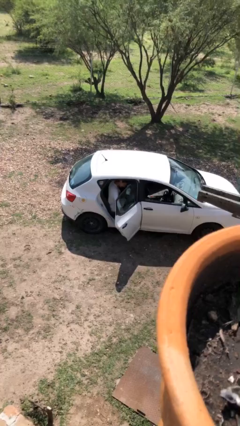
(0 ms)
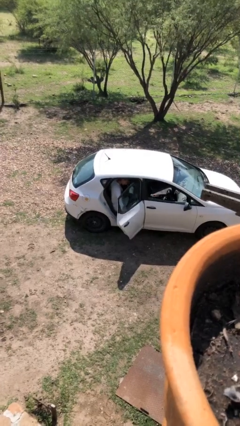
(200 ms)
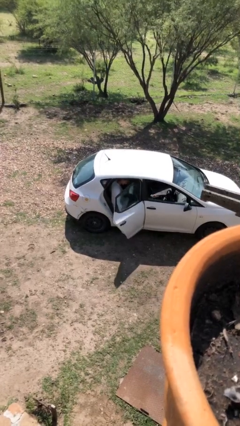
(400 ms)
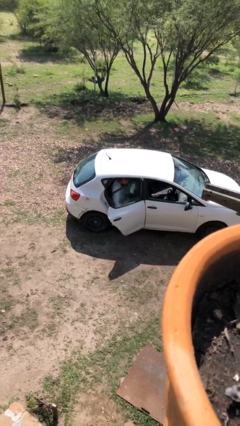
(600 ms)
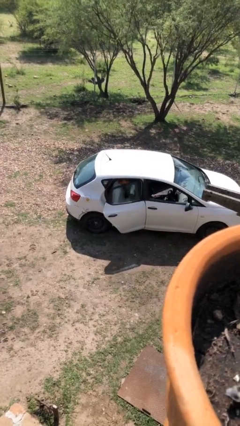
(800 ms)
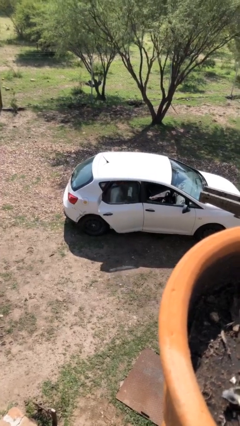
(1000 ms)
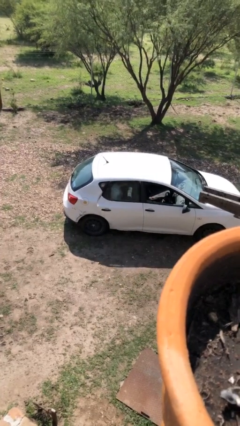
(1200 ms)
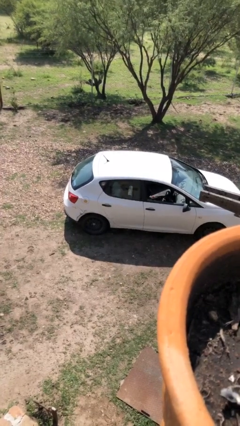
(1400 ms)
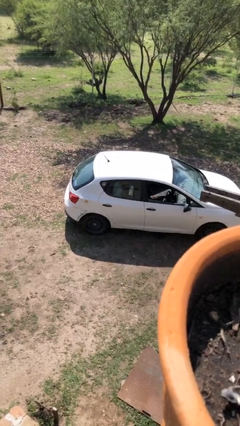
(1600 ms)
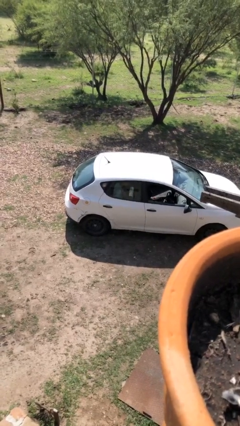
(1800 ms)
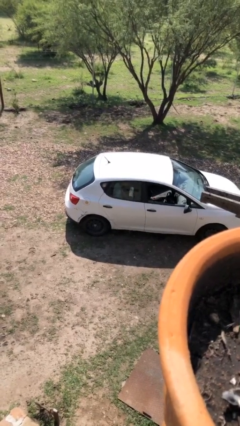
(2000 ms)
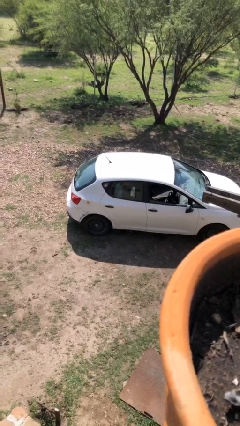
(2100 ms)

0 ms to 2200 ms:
person closes car door

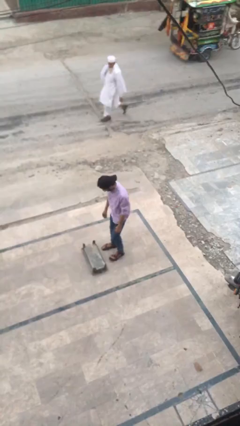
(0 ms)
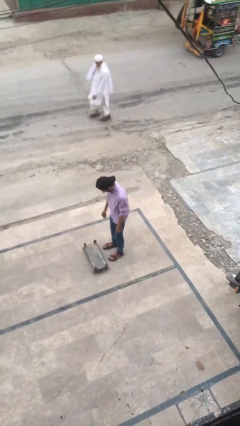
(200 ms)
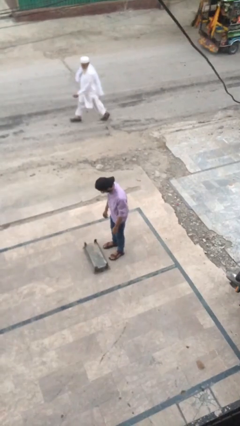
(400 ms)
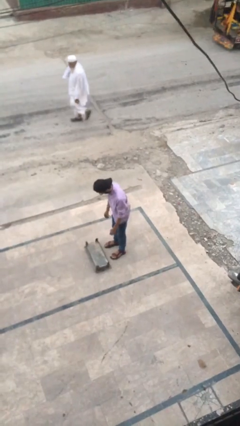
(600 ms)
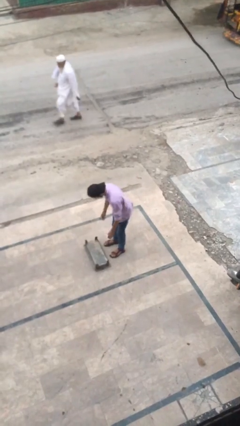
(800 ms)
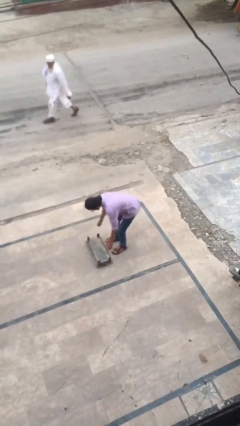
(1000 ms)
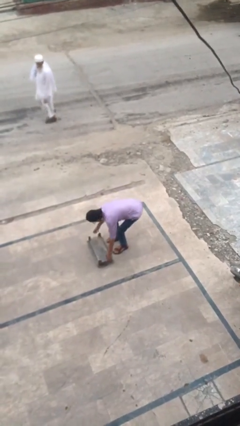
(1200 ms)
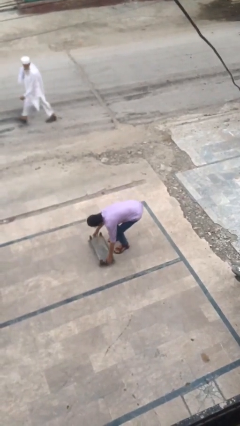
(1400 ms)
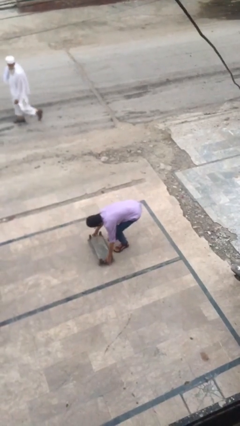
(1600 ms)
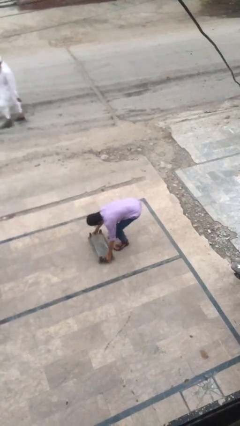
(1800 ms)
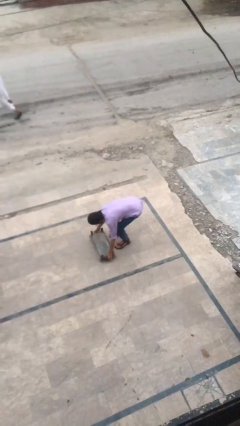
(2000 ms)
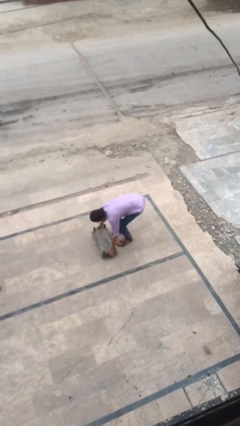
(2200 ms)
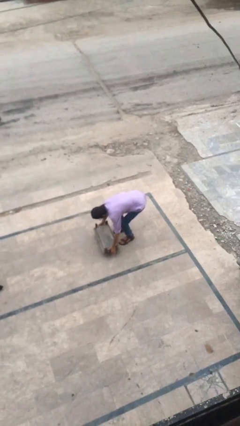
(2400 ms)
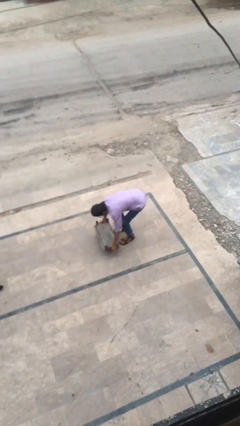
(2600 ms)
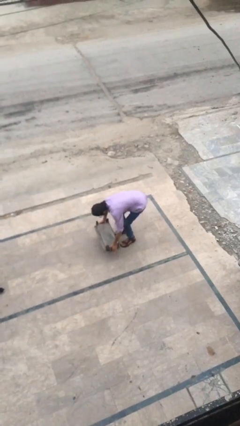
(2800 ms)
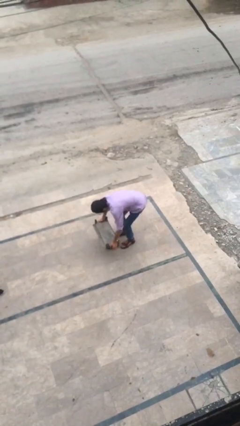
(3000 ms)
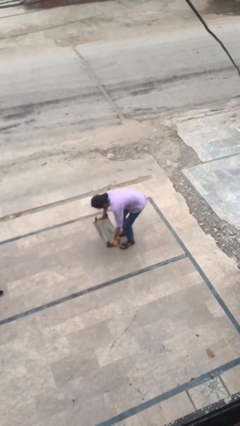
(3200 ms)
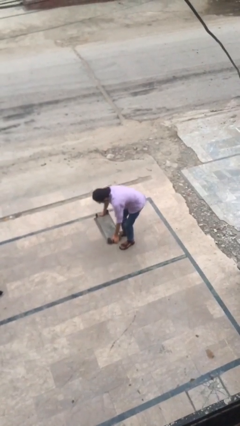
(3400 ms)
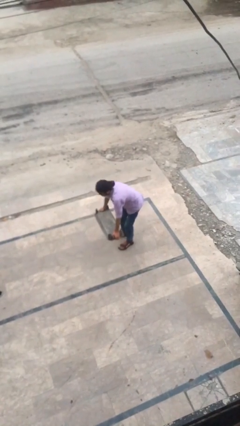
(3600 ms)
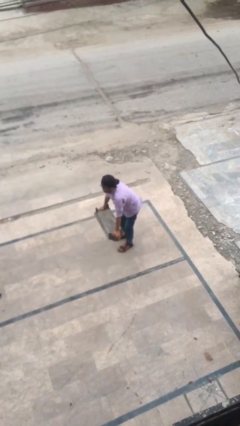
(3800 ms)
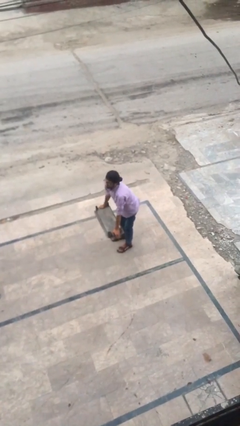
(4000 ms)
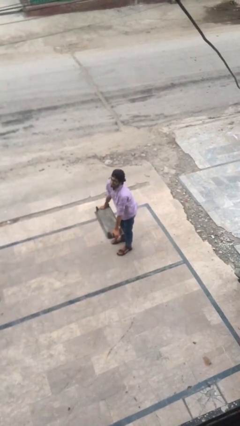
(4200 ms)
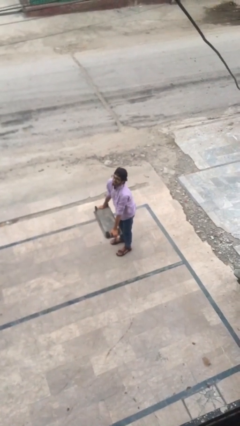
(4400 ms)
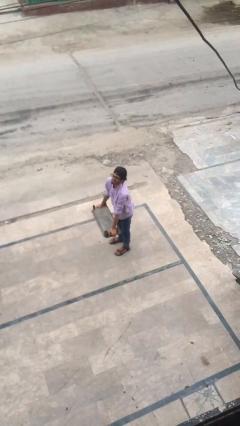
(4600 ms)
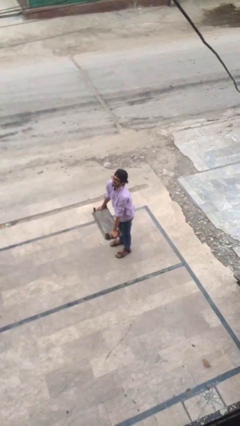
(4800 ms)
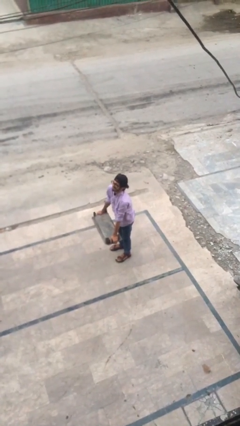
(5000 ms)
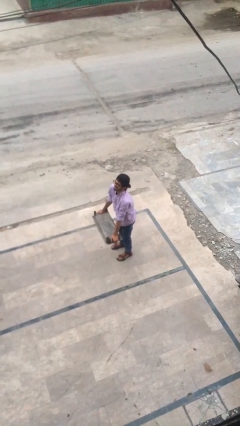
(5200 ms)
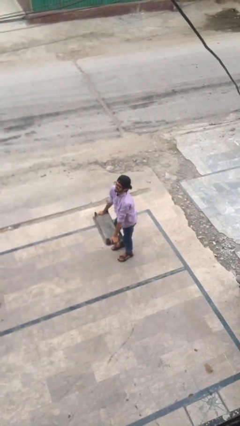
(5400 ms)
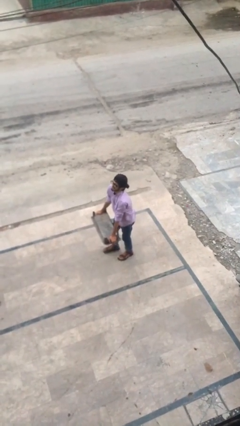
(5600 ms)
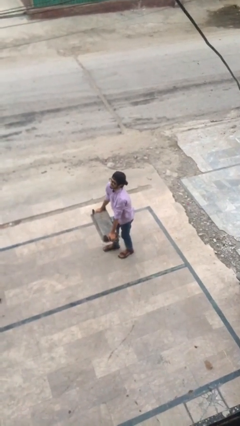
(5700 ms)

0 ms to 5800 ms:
person picks up object from floor

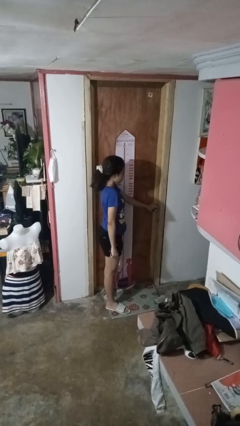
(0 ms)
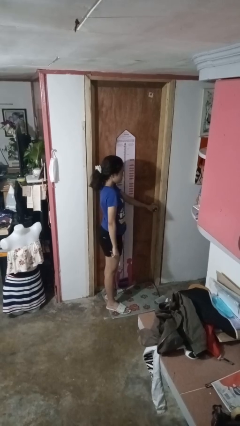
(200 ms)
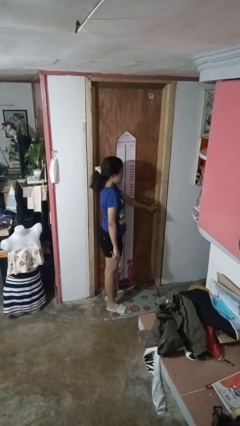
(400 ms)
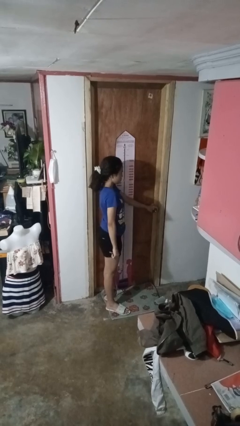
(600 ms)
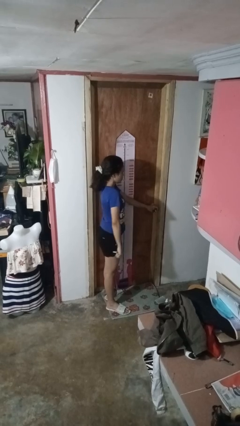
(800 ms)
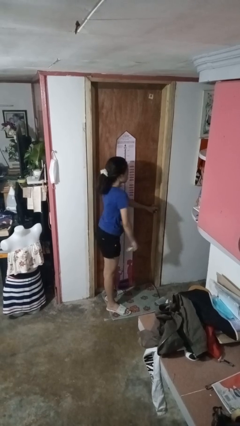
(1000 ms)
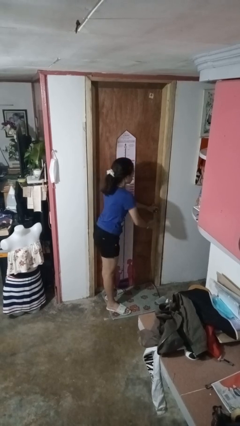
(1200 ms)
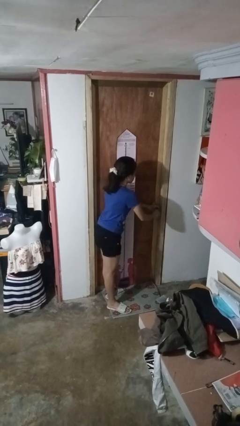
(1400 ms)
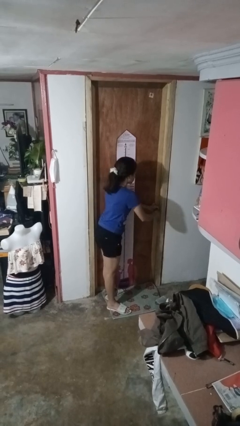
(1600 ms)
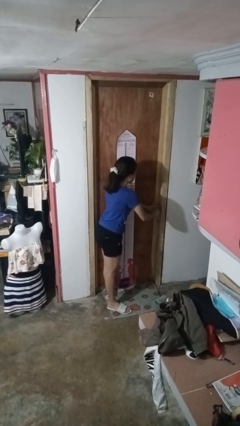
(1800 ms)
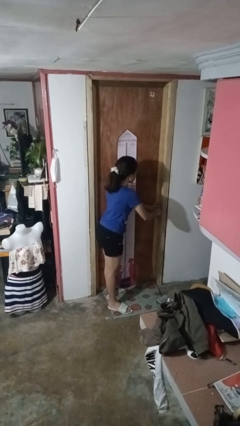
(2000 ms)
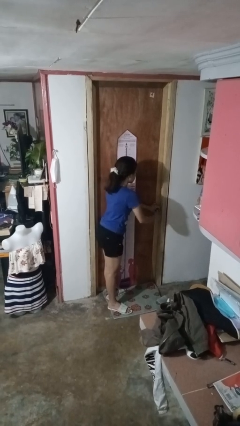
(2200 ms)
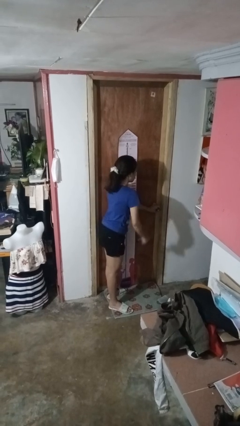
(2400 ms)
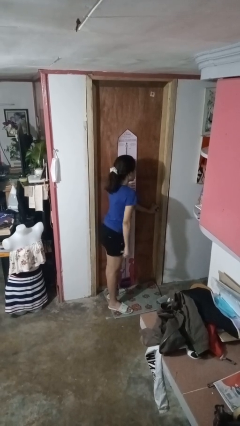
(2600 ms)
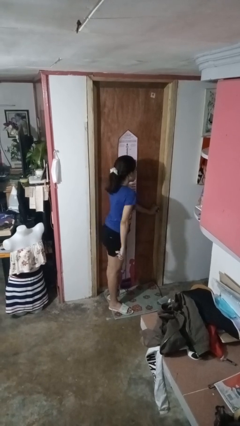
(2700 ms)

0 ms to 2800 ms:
person unlocks door with keys

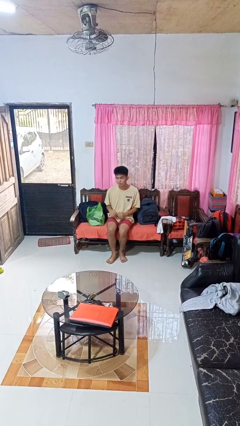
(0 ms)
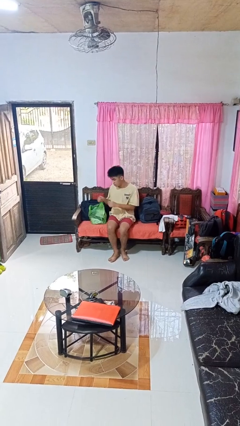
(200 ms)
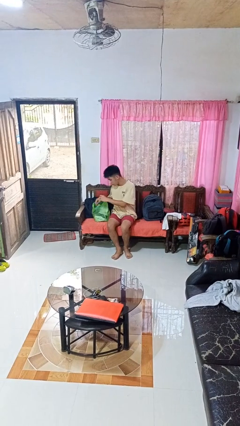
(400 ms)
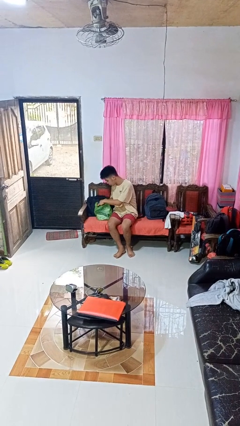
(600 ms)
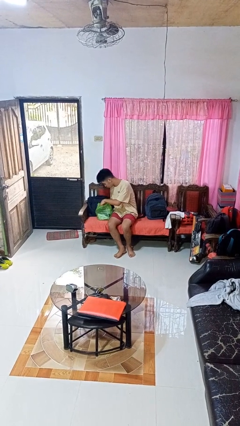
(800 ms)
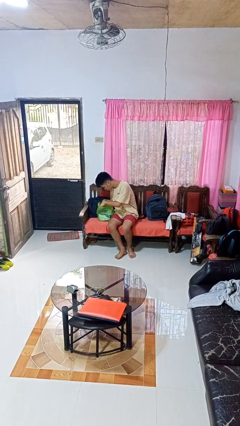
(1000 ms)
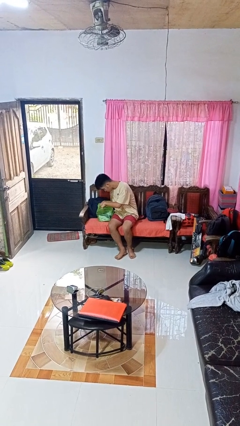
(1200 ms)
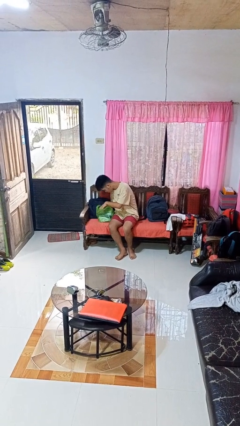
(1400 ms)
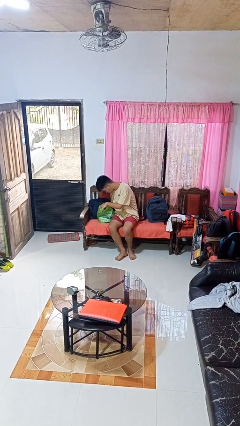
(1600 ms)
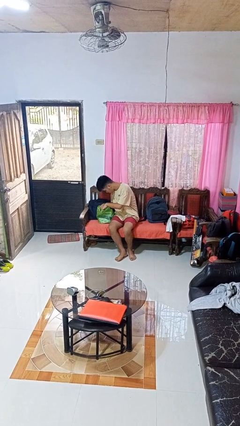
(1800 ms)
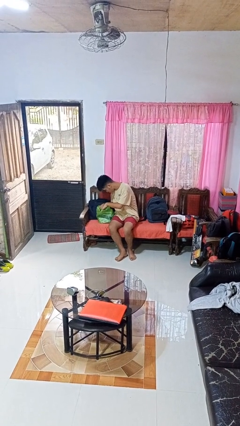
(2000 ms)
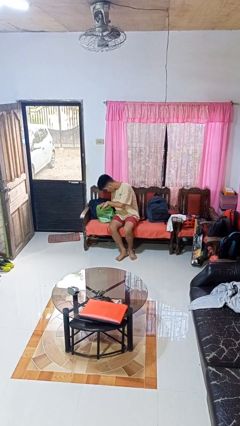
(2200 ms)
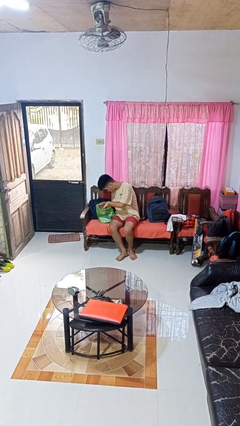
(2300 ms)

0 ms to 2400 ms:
person searches in bag

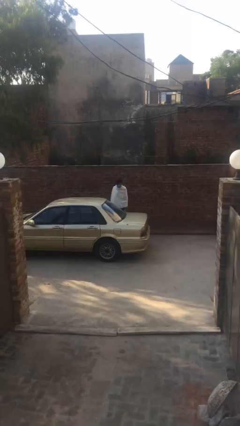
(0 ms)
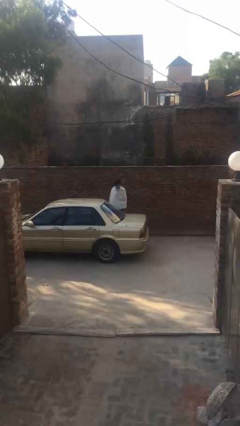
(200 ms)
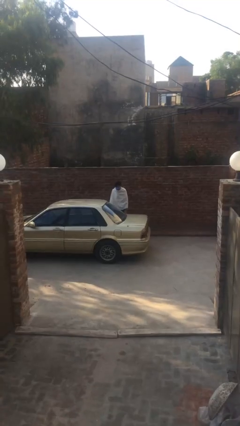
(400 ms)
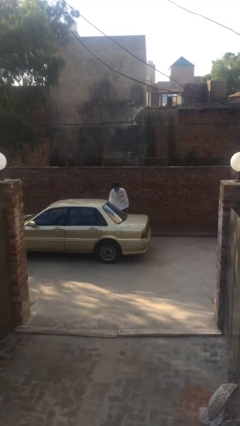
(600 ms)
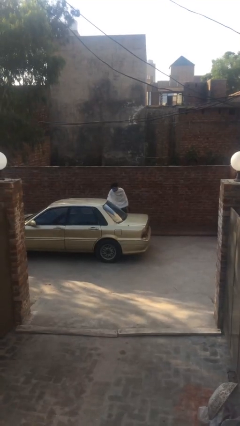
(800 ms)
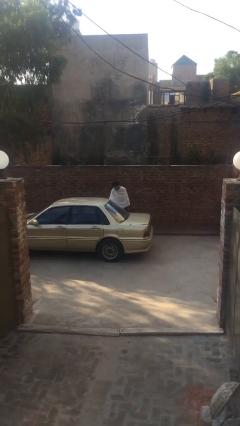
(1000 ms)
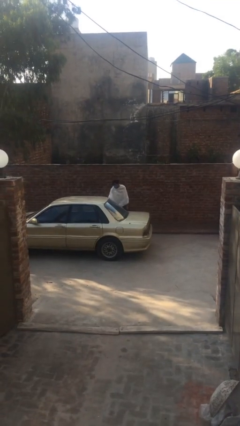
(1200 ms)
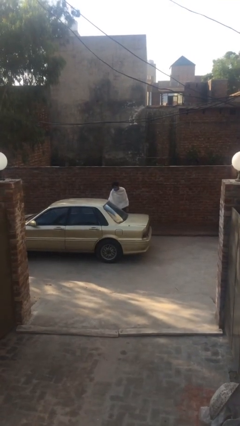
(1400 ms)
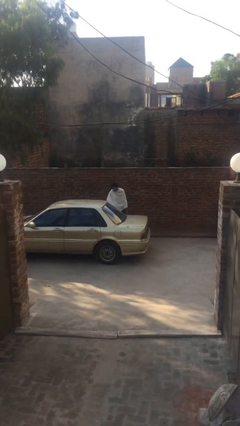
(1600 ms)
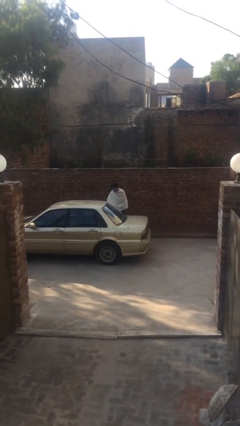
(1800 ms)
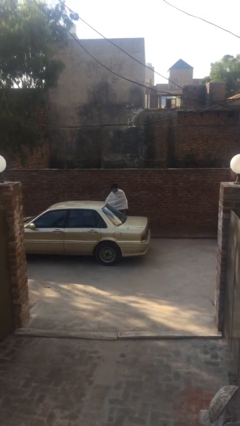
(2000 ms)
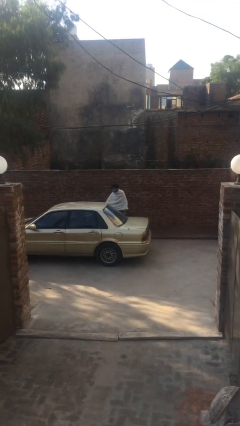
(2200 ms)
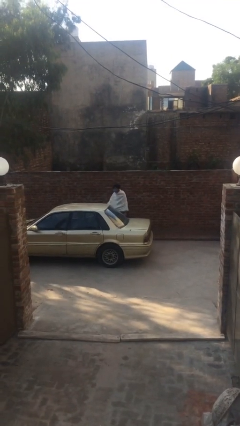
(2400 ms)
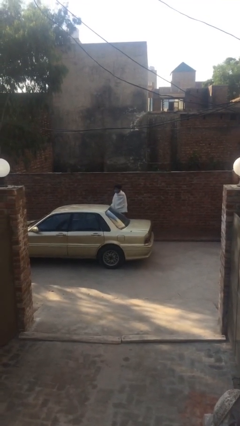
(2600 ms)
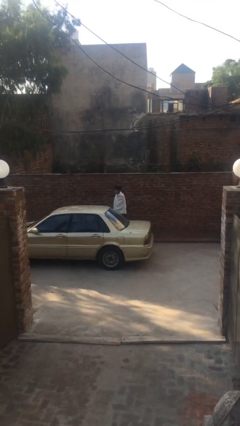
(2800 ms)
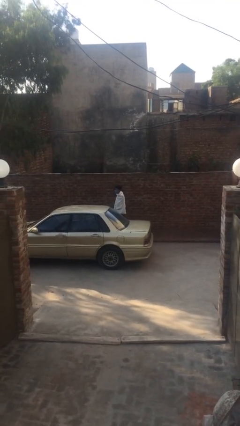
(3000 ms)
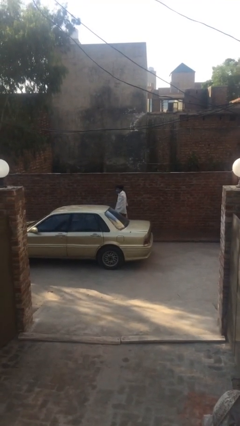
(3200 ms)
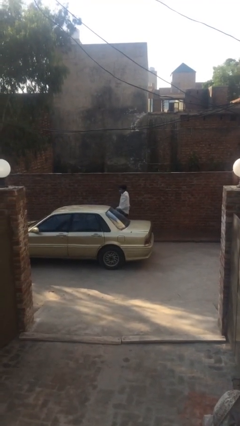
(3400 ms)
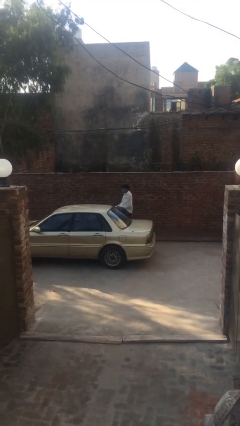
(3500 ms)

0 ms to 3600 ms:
person opens car door

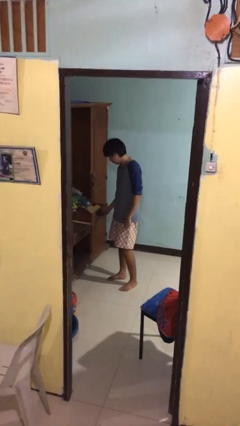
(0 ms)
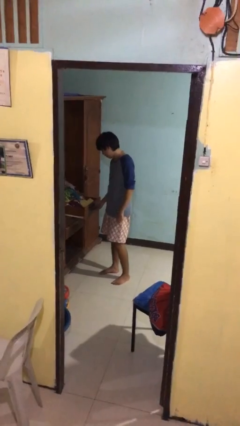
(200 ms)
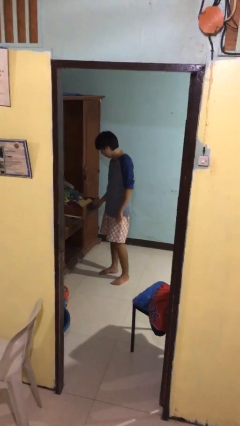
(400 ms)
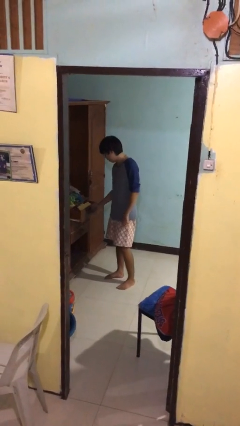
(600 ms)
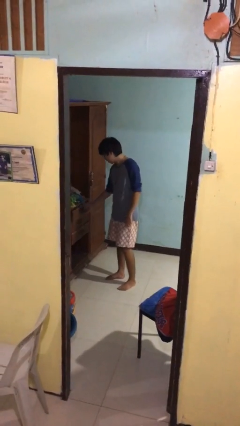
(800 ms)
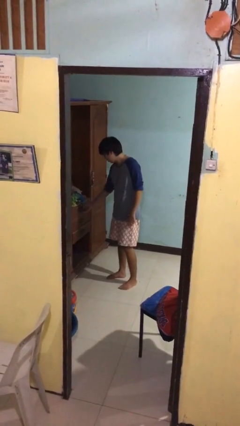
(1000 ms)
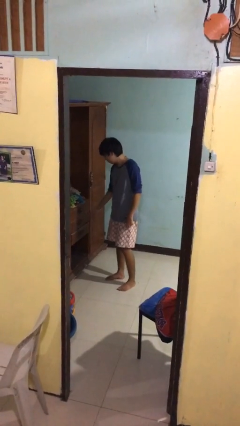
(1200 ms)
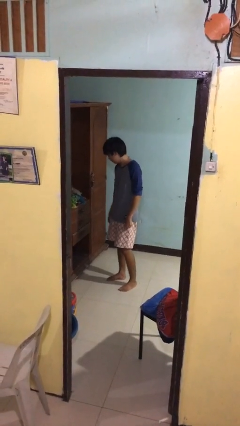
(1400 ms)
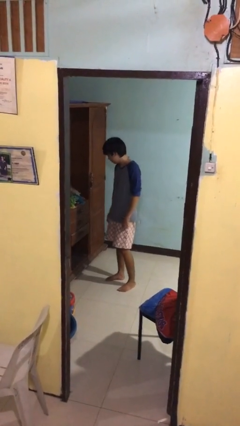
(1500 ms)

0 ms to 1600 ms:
person closes dresser drawer
